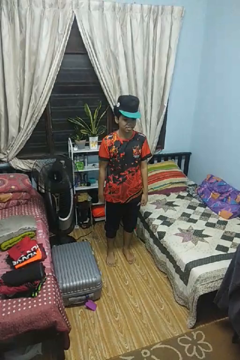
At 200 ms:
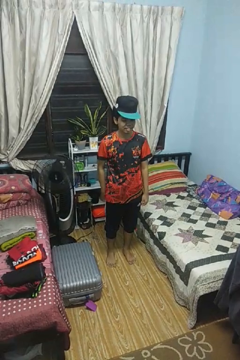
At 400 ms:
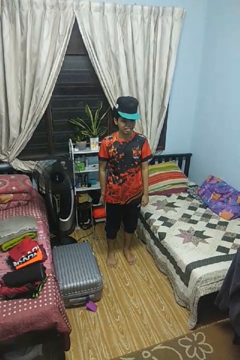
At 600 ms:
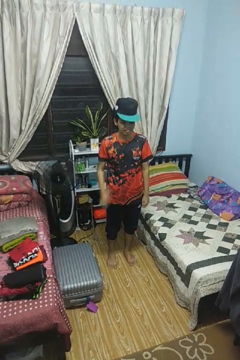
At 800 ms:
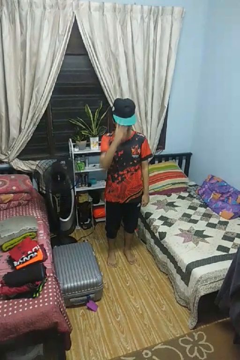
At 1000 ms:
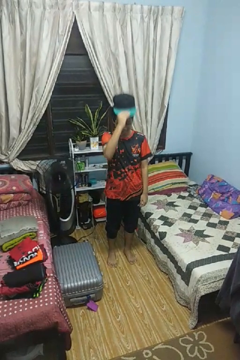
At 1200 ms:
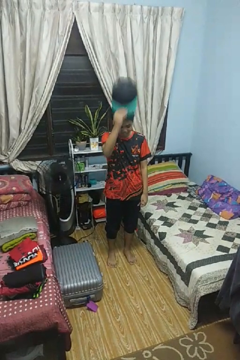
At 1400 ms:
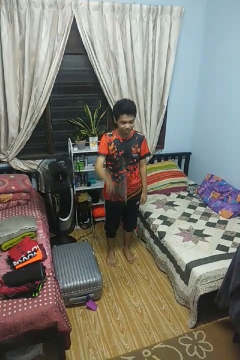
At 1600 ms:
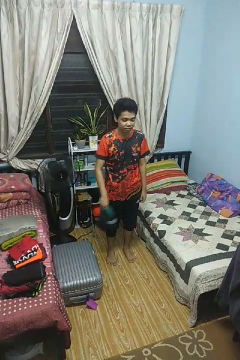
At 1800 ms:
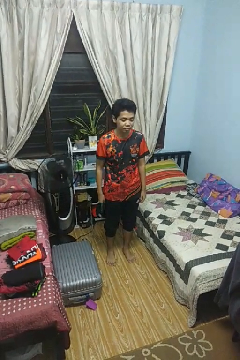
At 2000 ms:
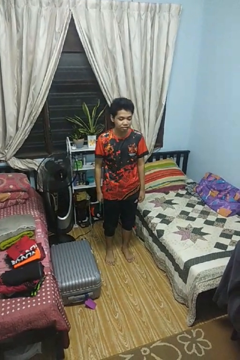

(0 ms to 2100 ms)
person takes off hat

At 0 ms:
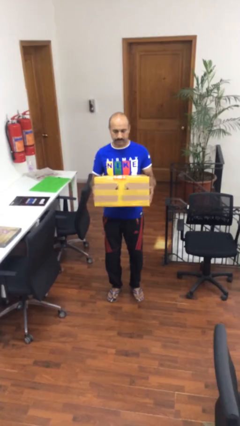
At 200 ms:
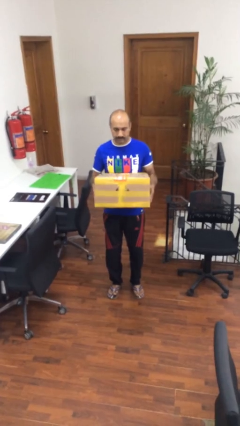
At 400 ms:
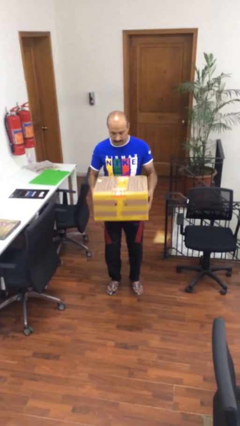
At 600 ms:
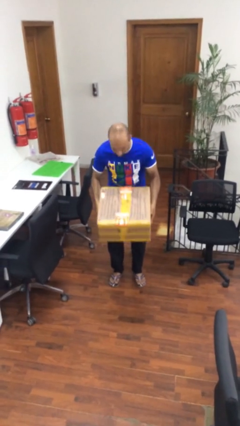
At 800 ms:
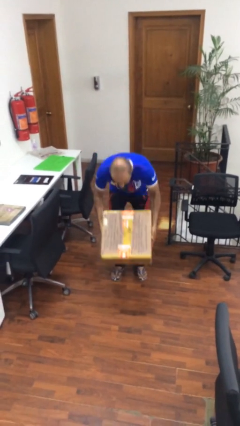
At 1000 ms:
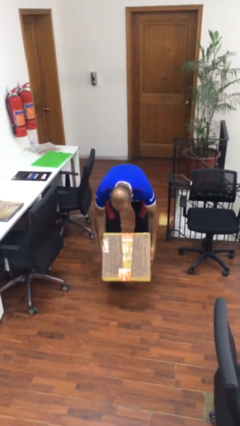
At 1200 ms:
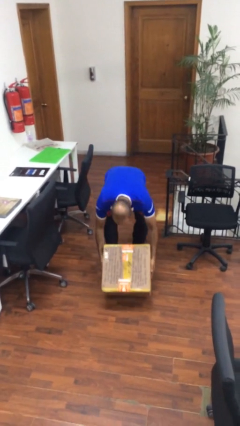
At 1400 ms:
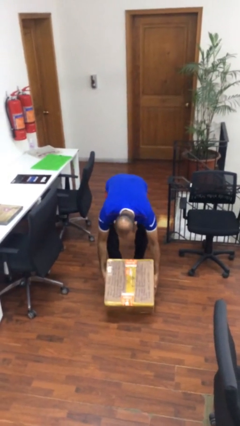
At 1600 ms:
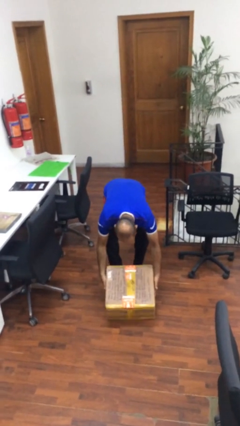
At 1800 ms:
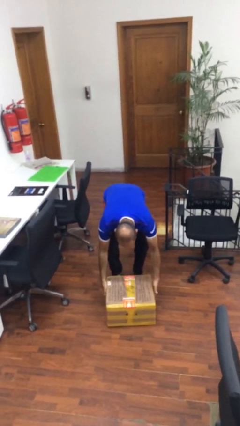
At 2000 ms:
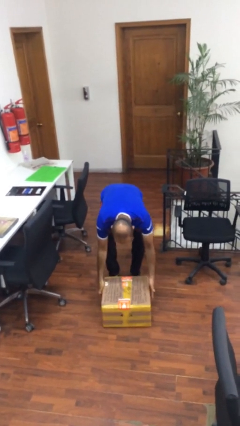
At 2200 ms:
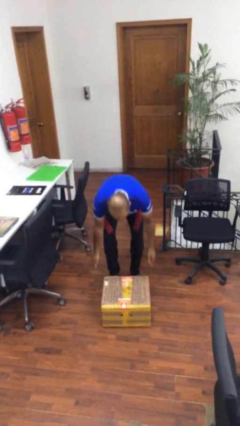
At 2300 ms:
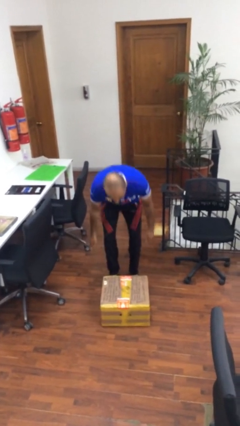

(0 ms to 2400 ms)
person puts down object on floor

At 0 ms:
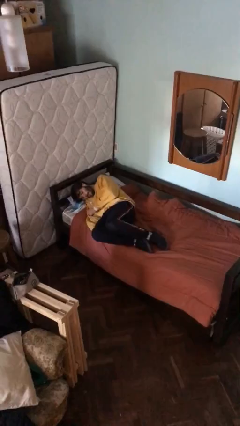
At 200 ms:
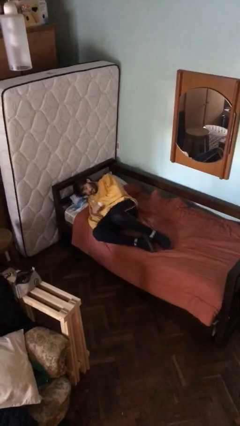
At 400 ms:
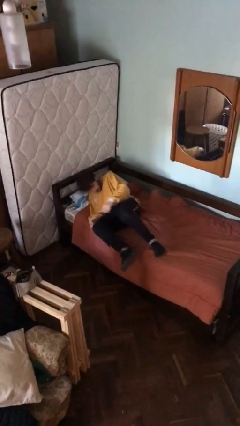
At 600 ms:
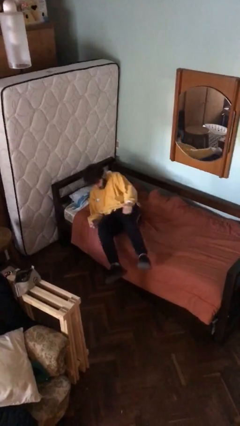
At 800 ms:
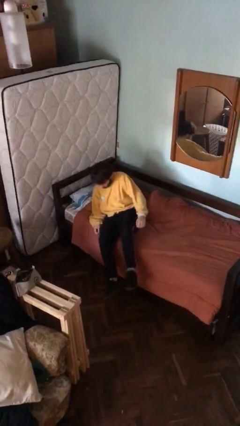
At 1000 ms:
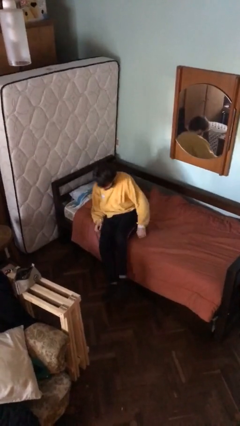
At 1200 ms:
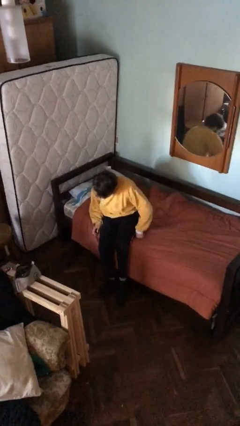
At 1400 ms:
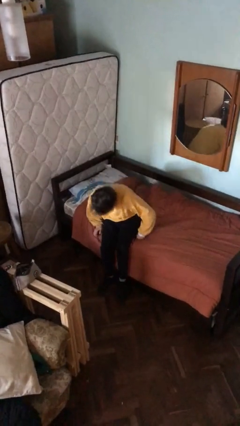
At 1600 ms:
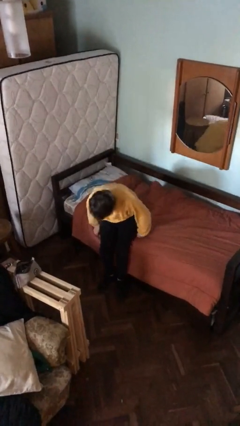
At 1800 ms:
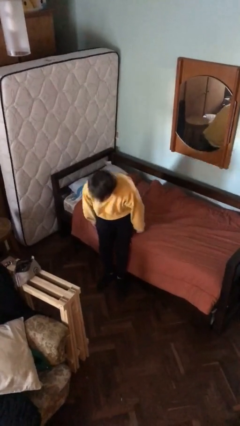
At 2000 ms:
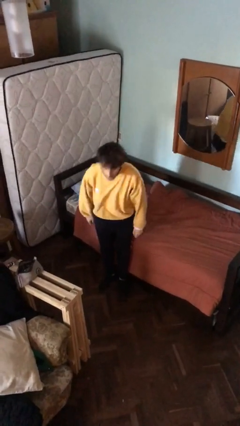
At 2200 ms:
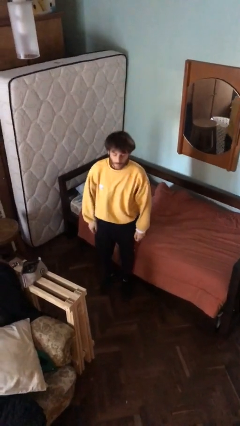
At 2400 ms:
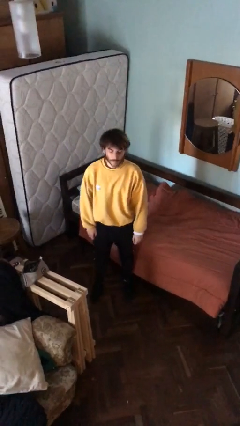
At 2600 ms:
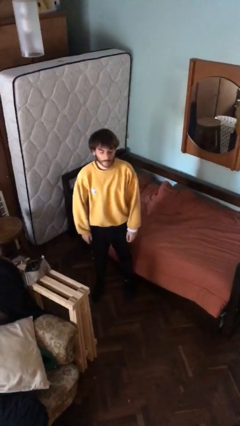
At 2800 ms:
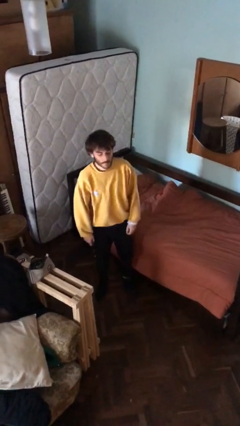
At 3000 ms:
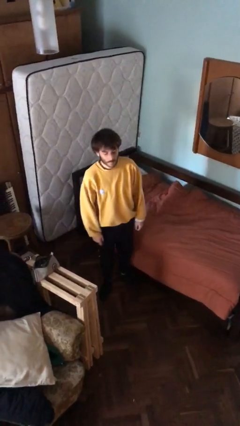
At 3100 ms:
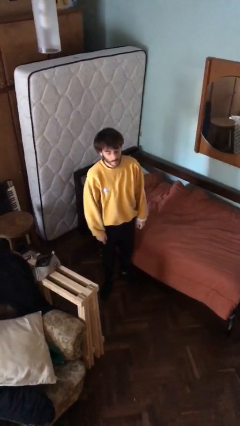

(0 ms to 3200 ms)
person stands up

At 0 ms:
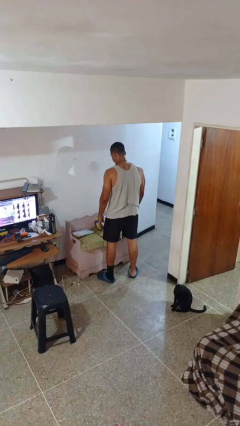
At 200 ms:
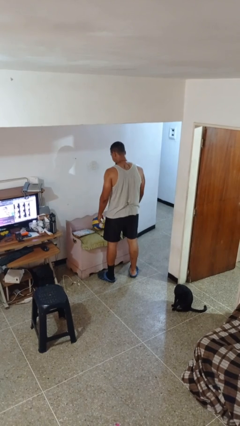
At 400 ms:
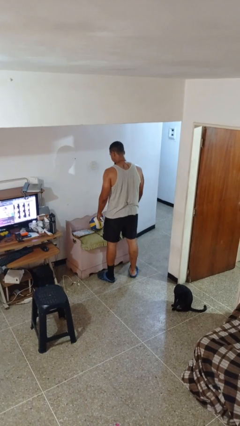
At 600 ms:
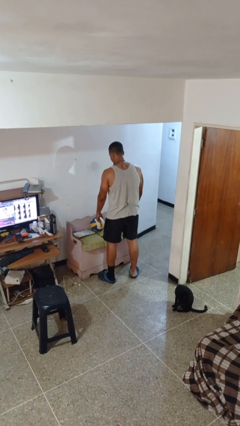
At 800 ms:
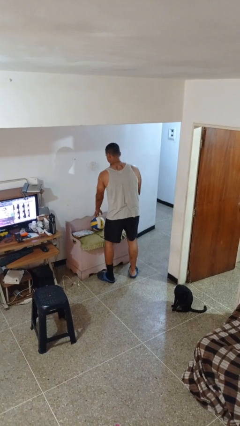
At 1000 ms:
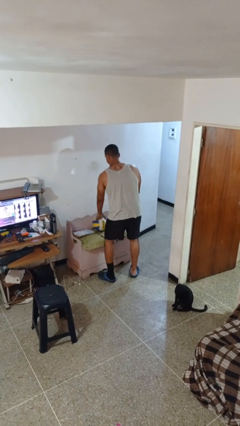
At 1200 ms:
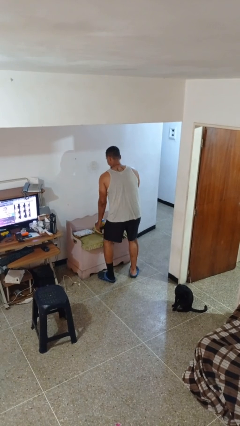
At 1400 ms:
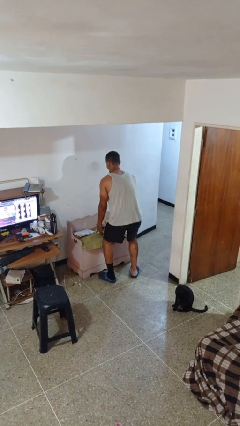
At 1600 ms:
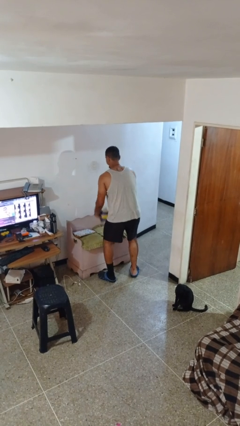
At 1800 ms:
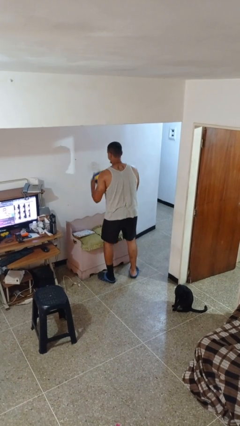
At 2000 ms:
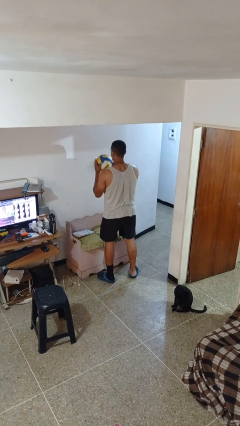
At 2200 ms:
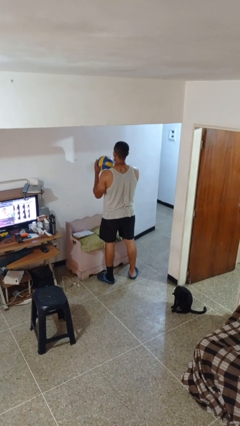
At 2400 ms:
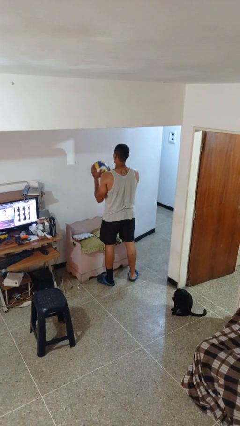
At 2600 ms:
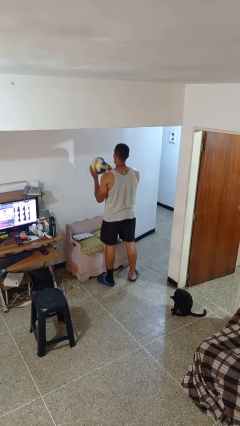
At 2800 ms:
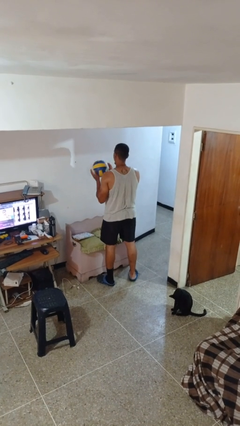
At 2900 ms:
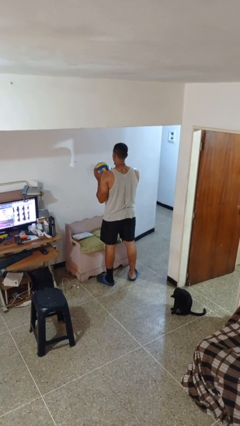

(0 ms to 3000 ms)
person picks up object from couch

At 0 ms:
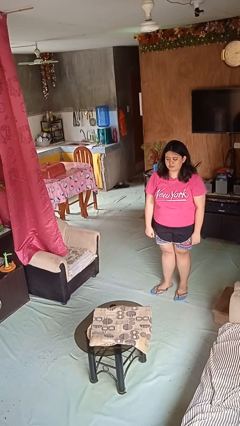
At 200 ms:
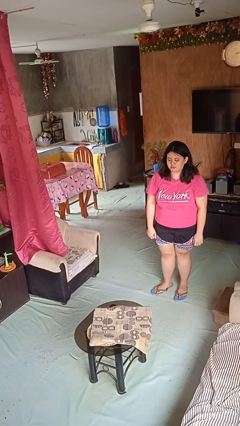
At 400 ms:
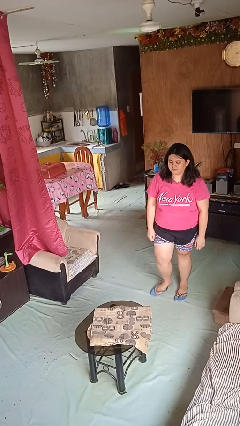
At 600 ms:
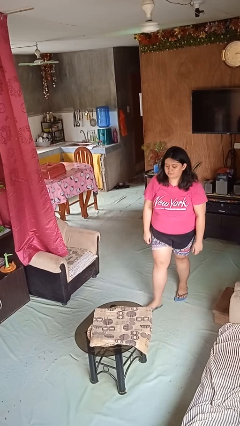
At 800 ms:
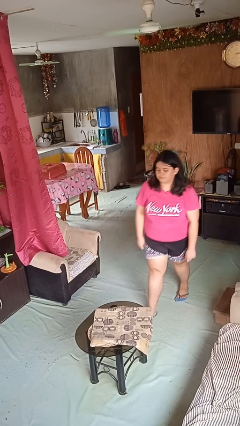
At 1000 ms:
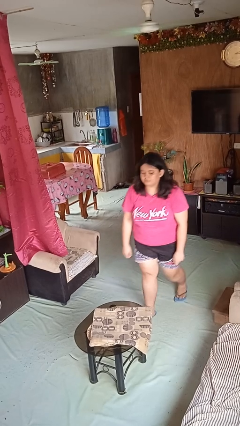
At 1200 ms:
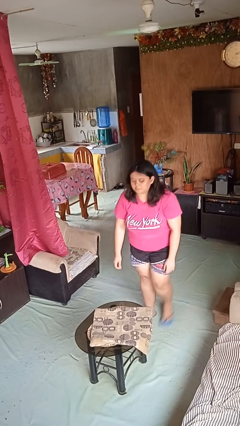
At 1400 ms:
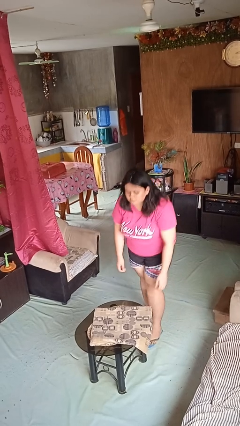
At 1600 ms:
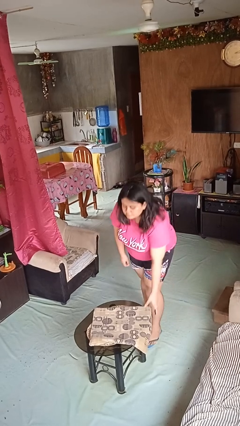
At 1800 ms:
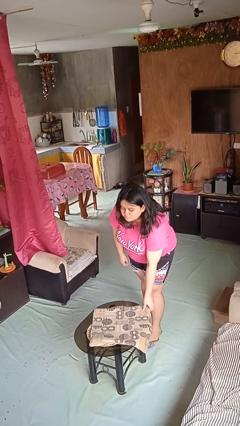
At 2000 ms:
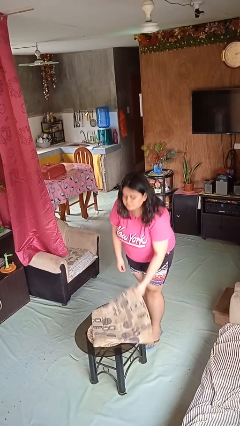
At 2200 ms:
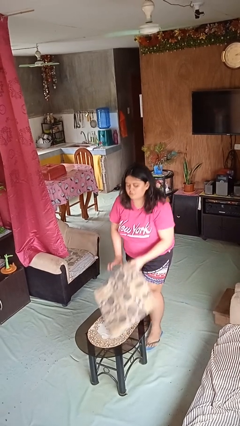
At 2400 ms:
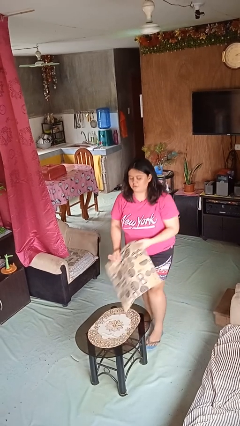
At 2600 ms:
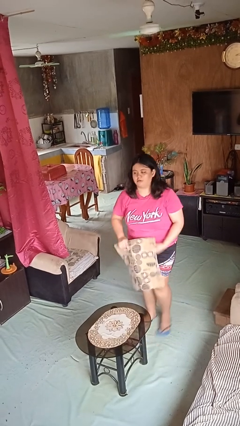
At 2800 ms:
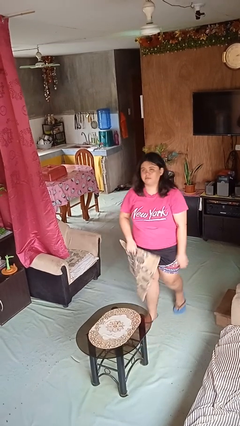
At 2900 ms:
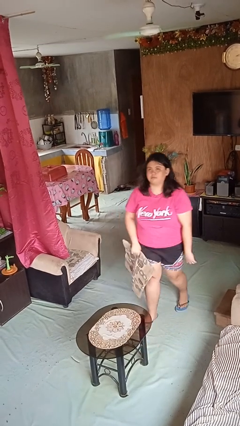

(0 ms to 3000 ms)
person picks up object from table

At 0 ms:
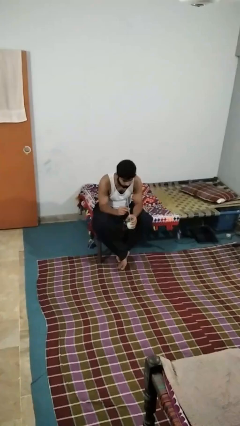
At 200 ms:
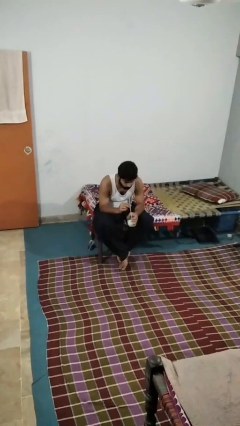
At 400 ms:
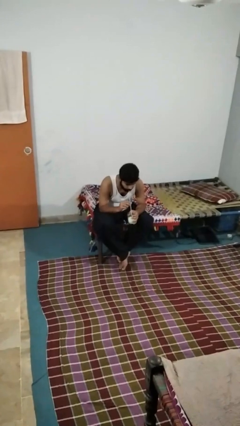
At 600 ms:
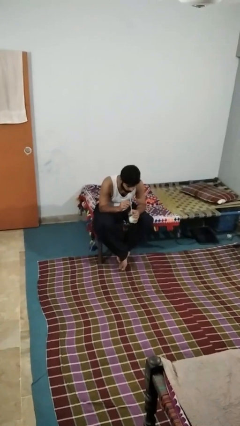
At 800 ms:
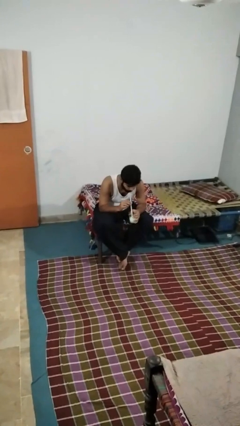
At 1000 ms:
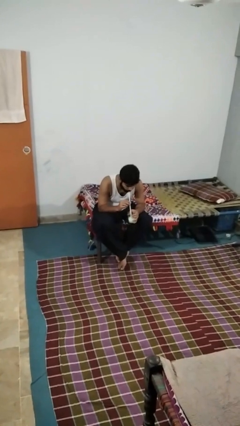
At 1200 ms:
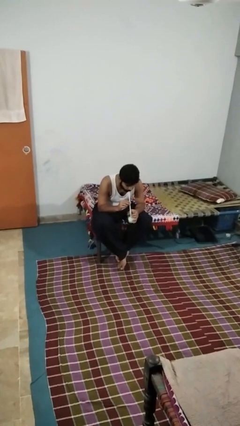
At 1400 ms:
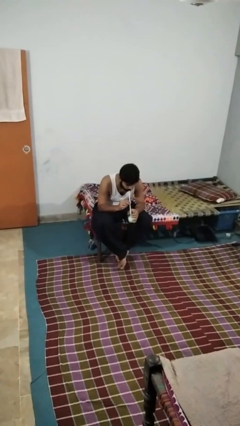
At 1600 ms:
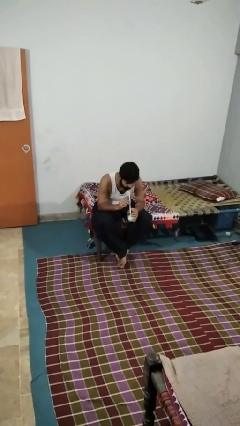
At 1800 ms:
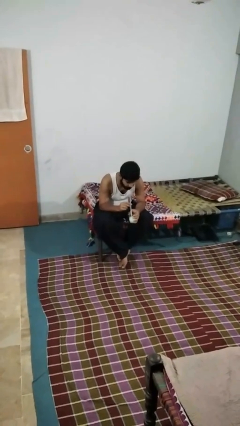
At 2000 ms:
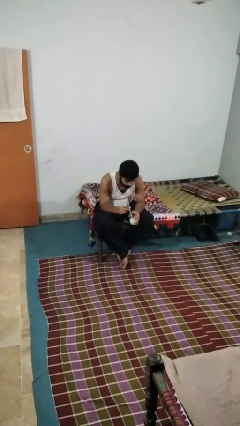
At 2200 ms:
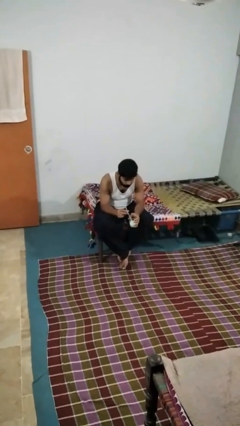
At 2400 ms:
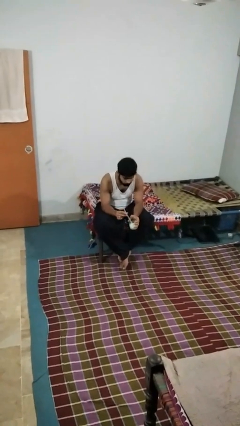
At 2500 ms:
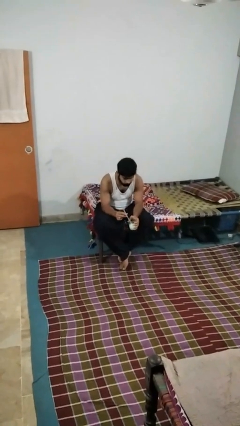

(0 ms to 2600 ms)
person drinks from straw

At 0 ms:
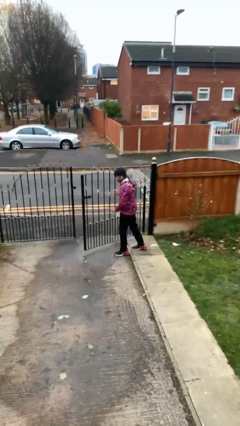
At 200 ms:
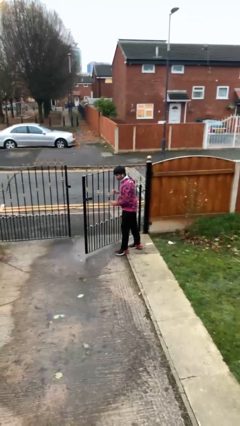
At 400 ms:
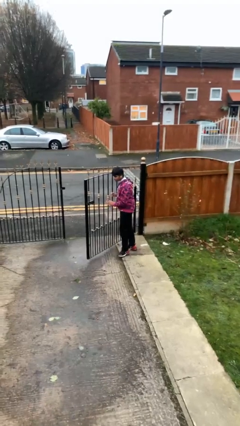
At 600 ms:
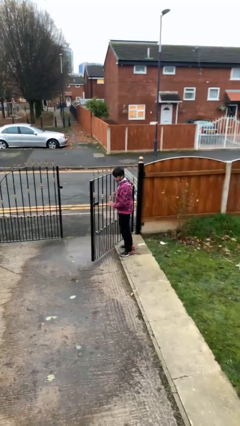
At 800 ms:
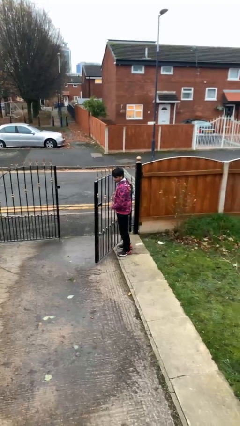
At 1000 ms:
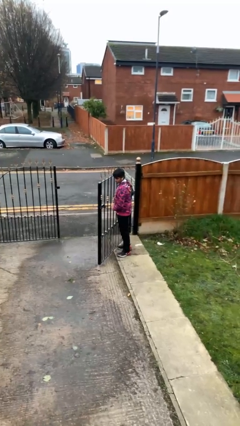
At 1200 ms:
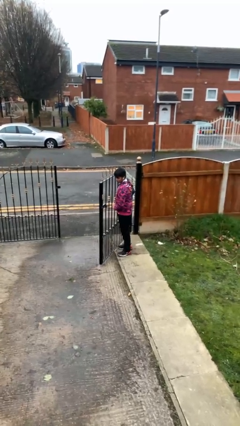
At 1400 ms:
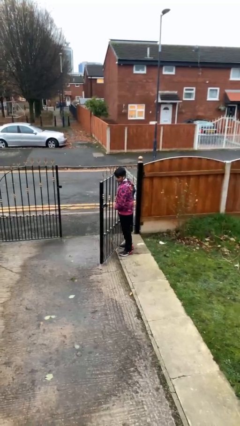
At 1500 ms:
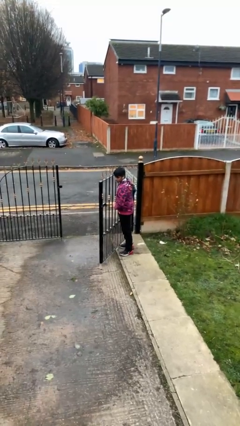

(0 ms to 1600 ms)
person opens facility door
